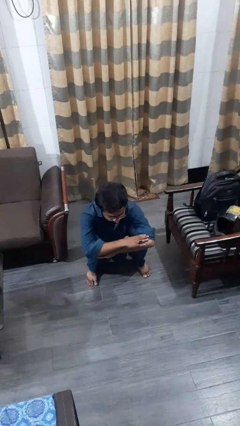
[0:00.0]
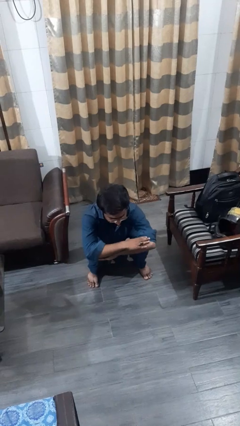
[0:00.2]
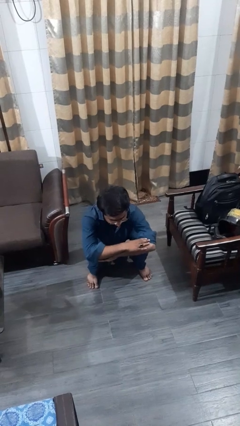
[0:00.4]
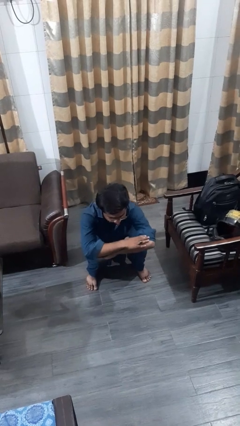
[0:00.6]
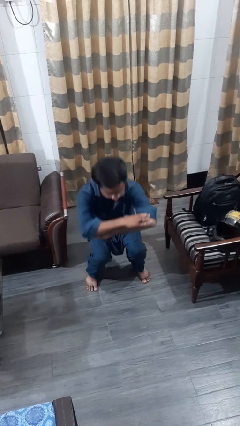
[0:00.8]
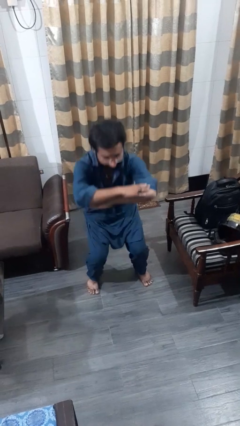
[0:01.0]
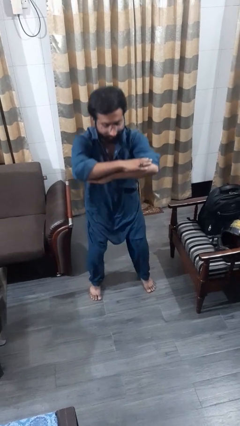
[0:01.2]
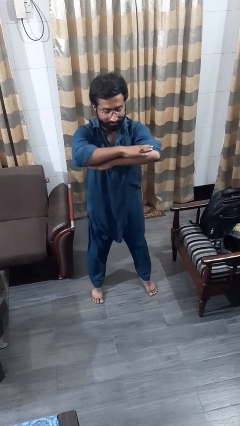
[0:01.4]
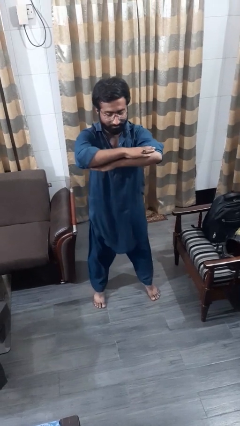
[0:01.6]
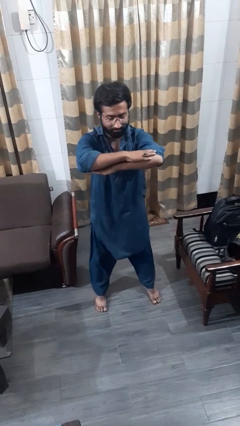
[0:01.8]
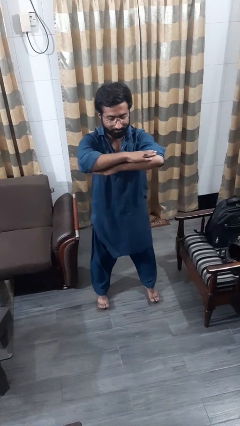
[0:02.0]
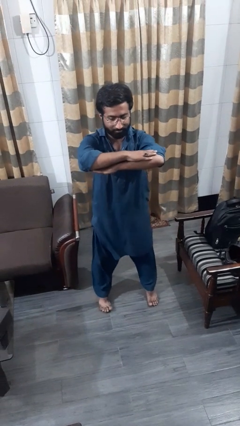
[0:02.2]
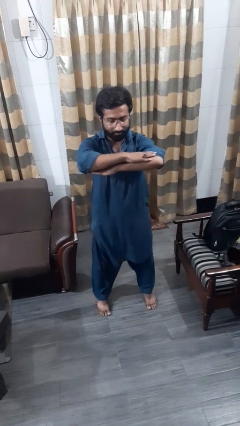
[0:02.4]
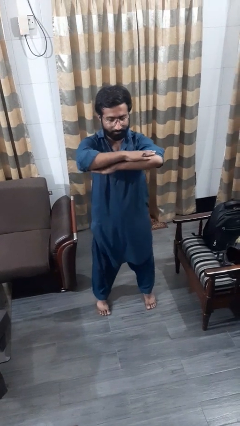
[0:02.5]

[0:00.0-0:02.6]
person stands up

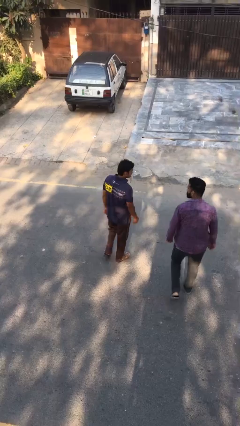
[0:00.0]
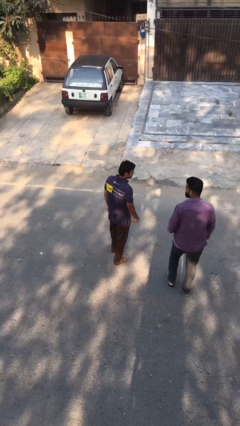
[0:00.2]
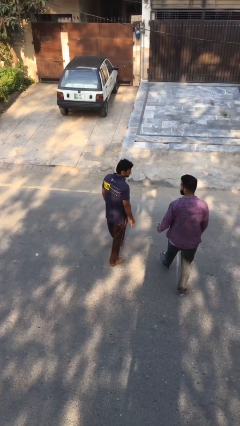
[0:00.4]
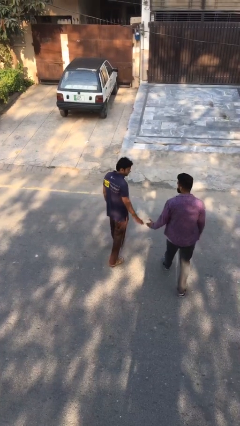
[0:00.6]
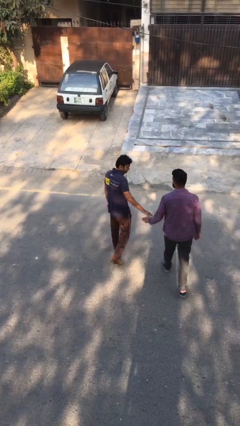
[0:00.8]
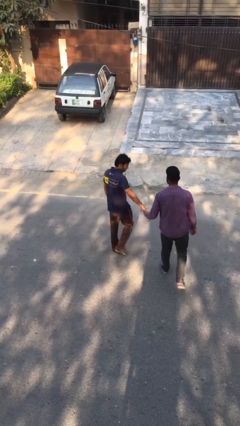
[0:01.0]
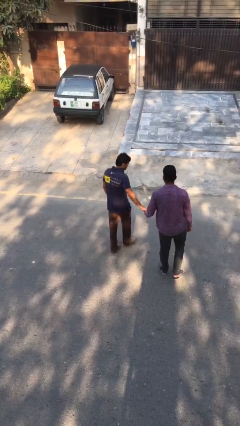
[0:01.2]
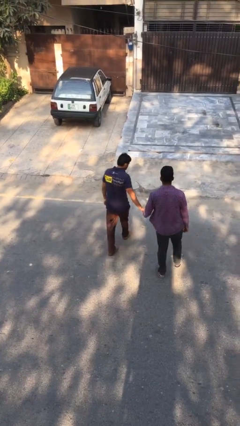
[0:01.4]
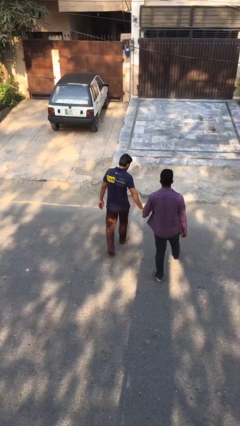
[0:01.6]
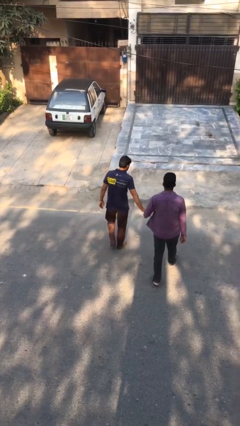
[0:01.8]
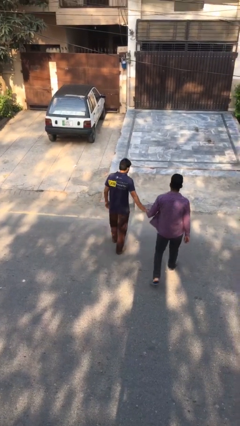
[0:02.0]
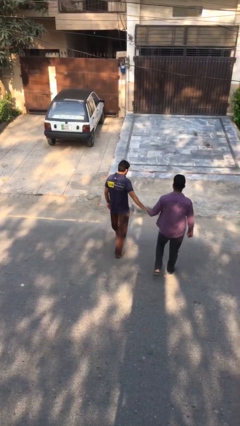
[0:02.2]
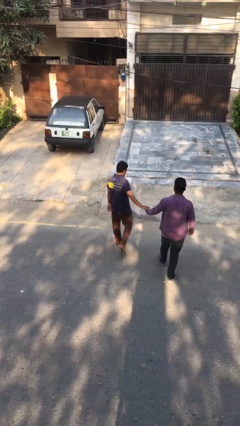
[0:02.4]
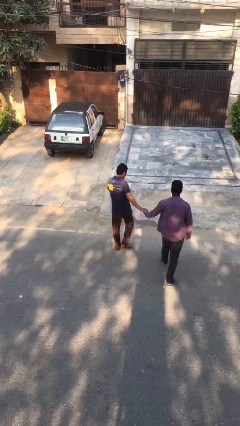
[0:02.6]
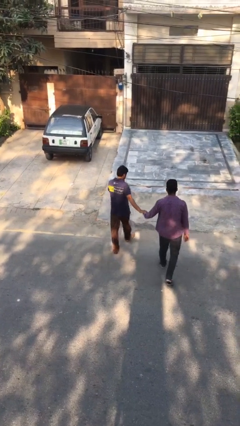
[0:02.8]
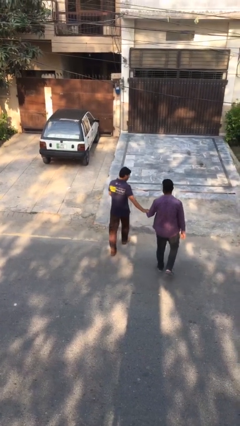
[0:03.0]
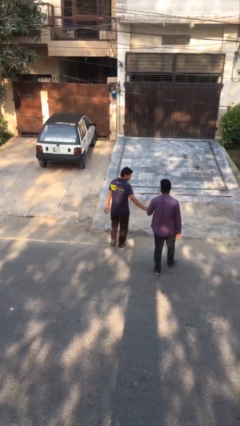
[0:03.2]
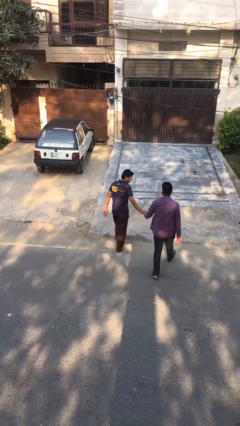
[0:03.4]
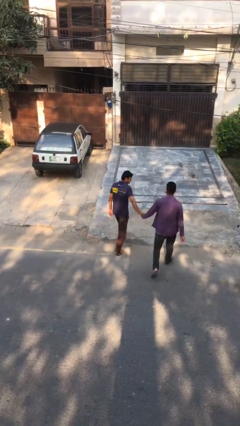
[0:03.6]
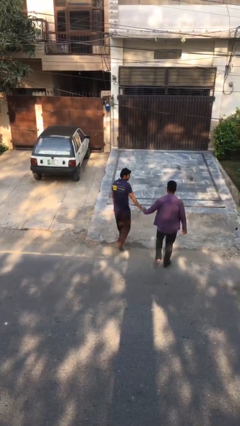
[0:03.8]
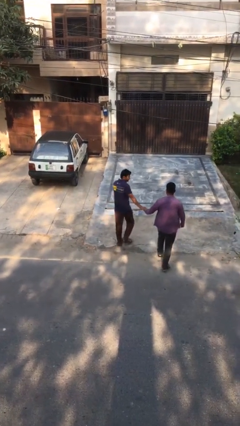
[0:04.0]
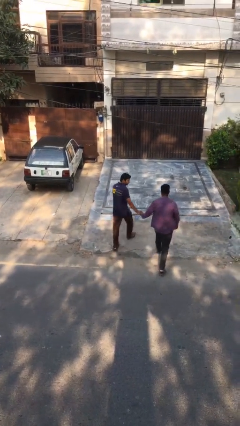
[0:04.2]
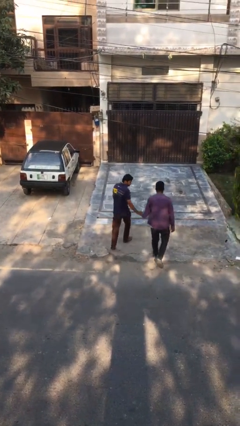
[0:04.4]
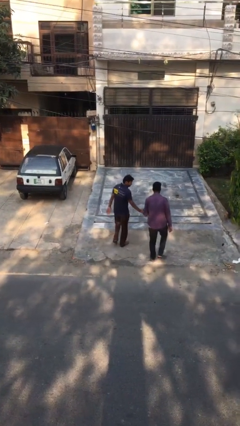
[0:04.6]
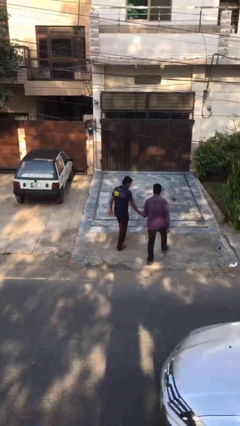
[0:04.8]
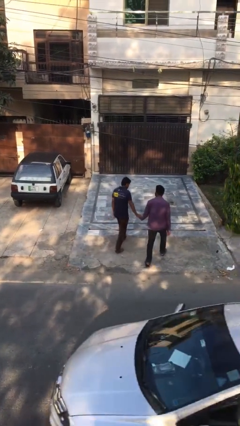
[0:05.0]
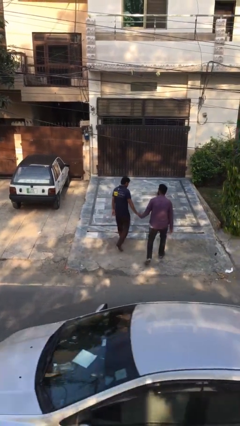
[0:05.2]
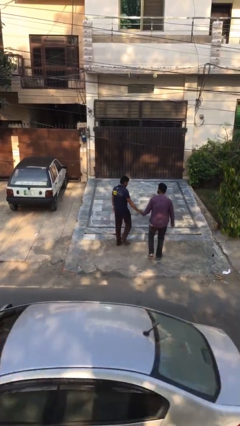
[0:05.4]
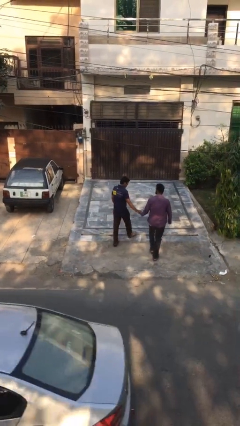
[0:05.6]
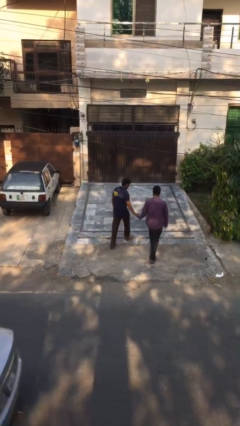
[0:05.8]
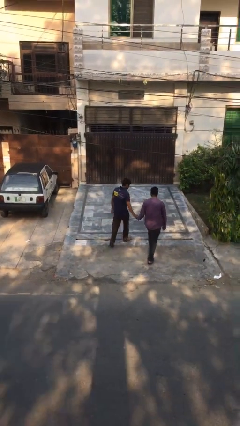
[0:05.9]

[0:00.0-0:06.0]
person holds hand

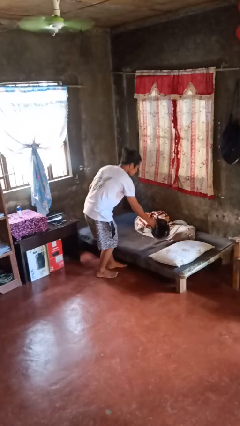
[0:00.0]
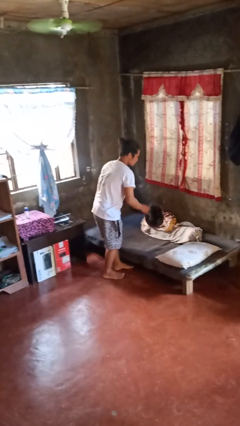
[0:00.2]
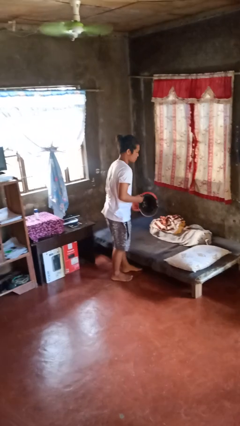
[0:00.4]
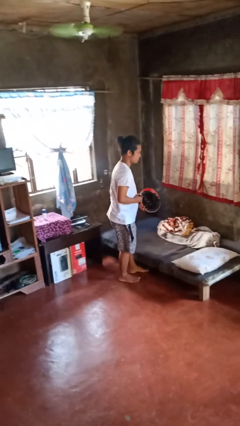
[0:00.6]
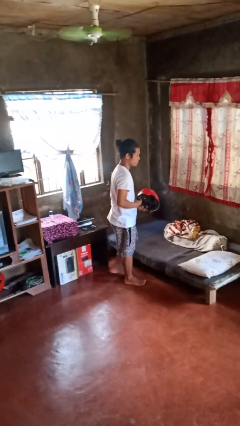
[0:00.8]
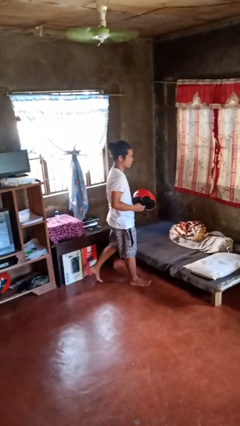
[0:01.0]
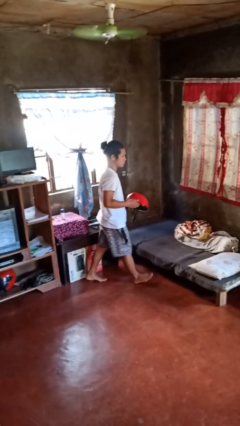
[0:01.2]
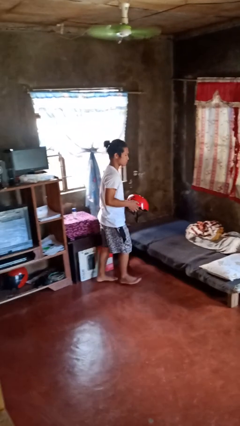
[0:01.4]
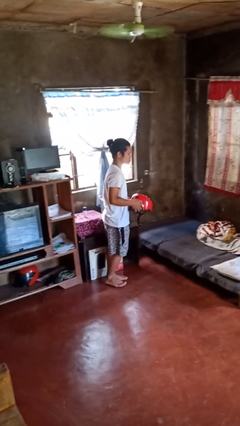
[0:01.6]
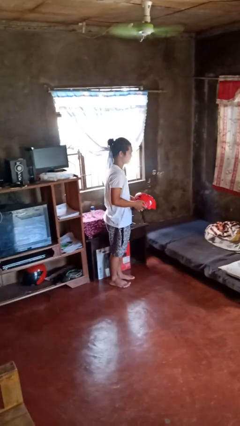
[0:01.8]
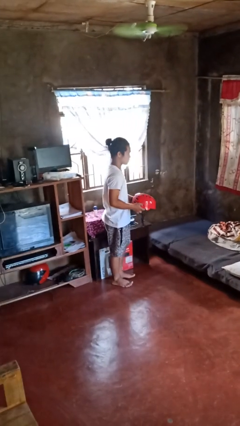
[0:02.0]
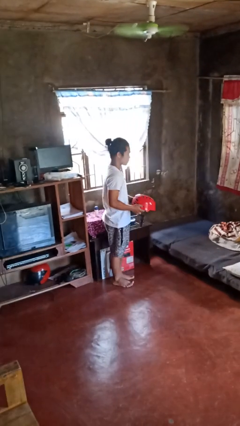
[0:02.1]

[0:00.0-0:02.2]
person picks up object from bed

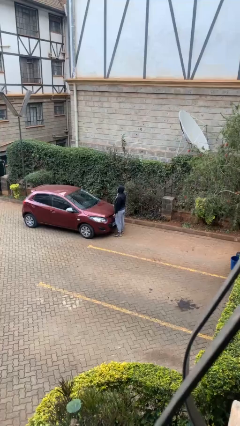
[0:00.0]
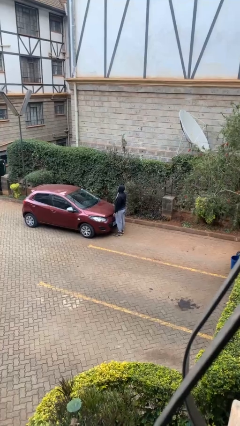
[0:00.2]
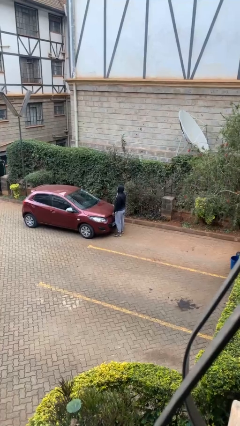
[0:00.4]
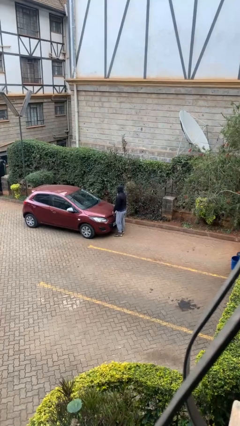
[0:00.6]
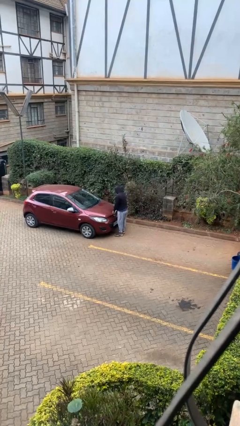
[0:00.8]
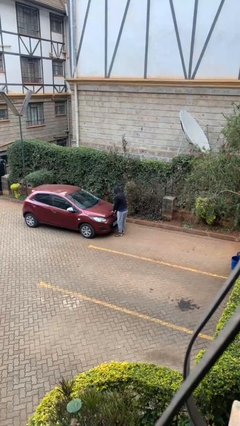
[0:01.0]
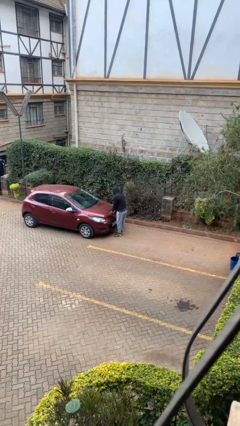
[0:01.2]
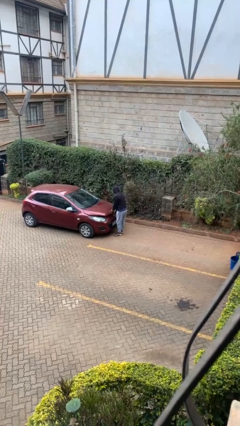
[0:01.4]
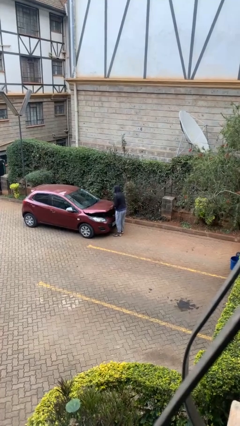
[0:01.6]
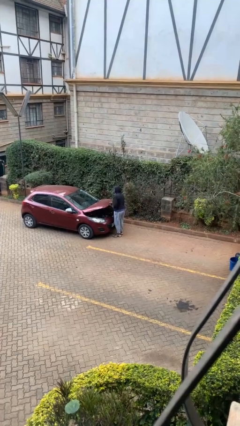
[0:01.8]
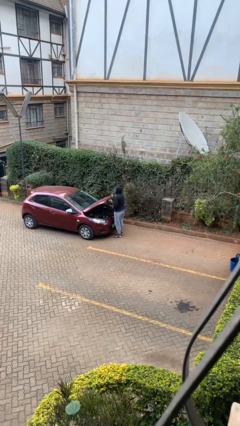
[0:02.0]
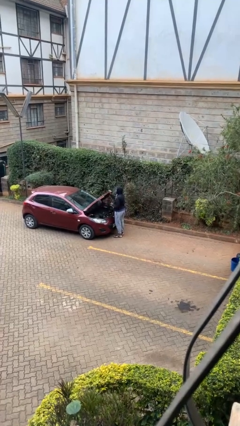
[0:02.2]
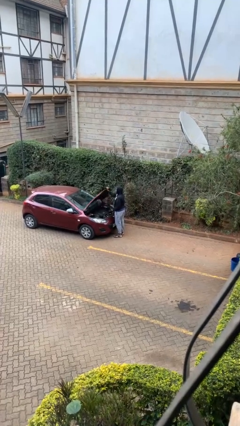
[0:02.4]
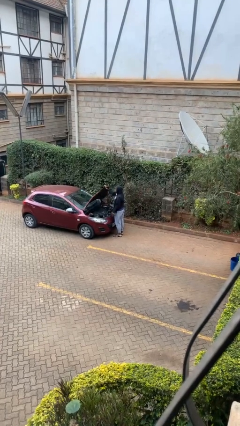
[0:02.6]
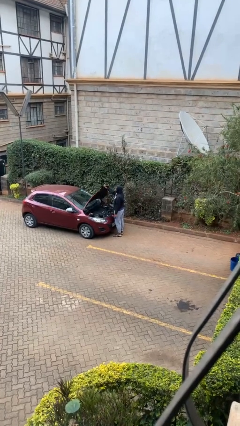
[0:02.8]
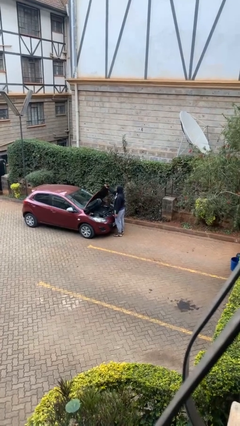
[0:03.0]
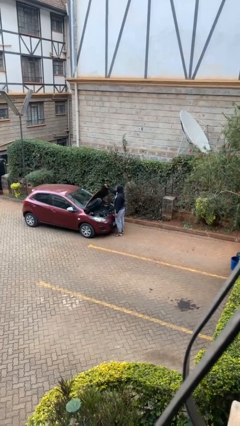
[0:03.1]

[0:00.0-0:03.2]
person opens car hood

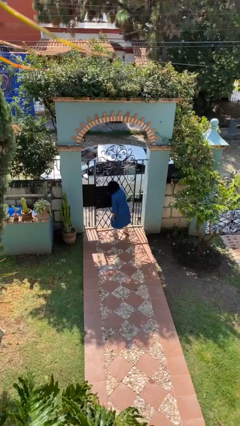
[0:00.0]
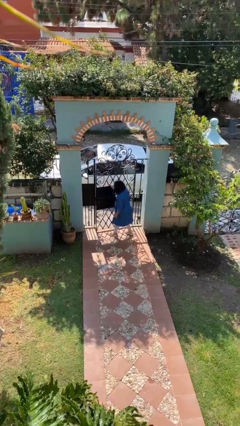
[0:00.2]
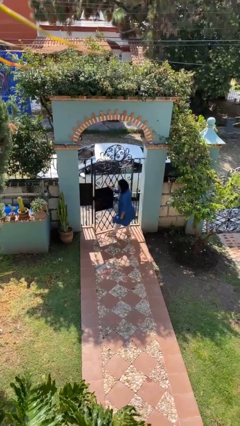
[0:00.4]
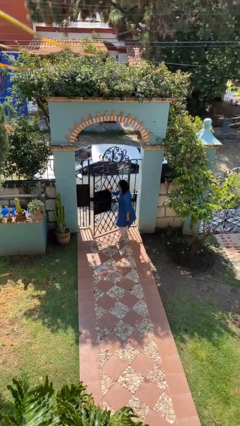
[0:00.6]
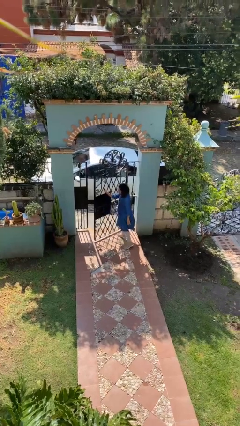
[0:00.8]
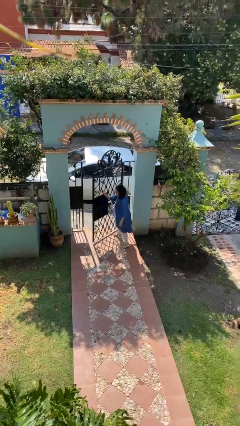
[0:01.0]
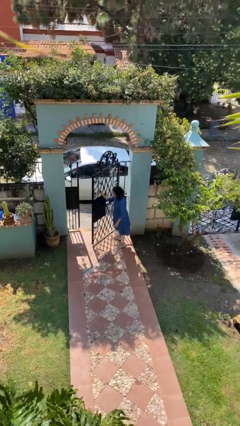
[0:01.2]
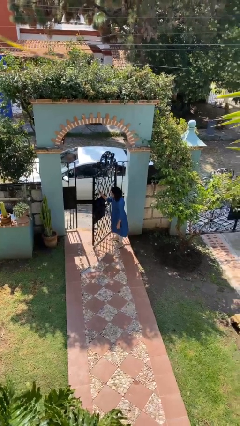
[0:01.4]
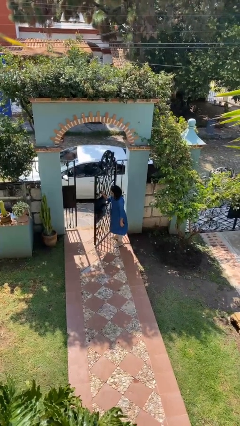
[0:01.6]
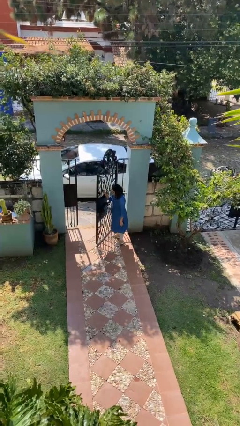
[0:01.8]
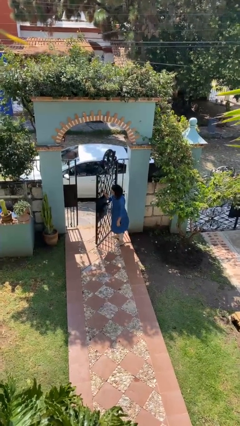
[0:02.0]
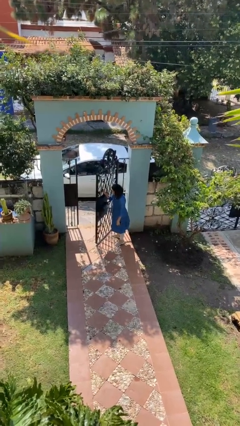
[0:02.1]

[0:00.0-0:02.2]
person opens facility door

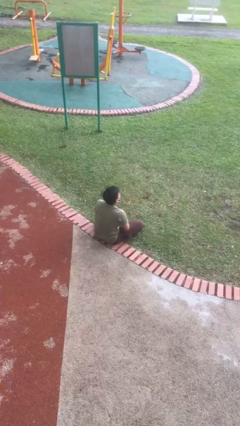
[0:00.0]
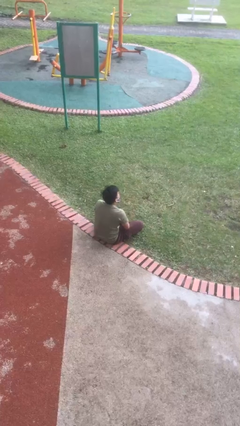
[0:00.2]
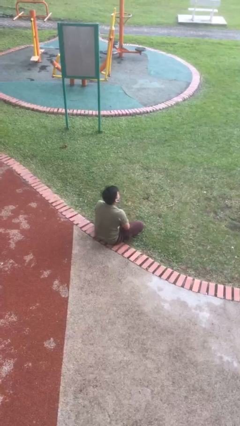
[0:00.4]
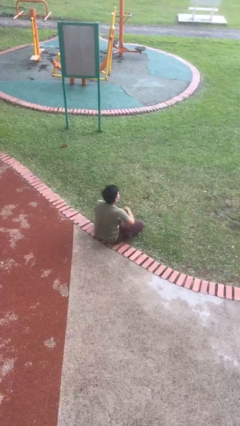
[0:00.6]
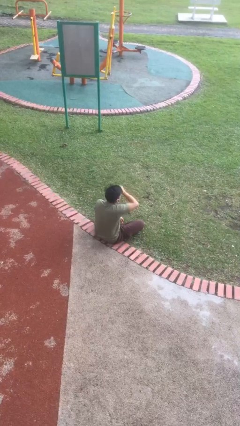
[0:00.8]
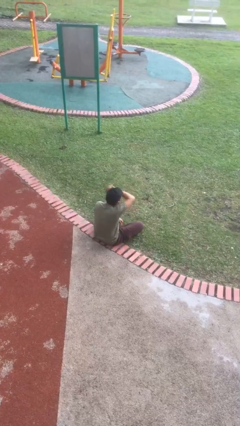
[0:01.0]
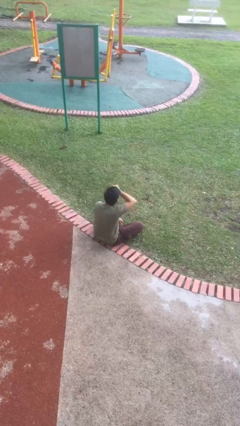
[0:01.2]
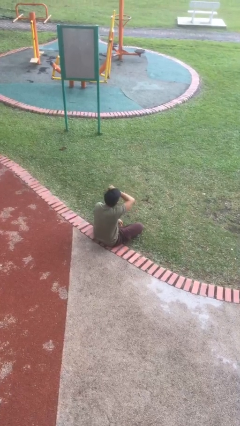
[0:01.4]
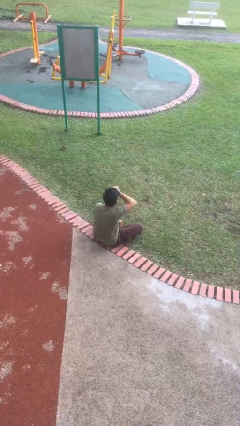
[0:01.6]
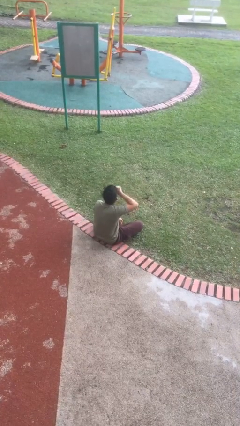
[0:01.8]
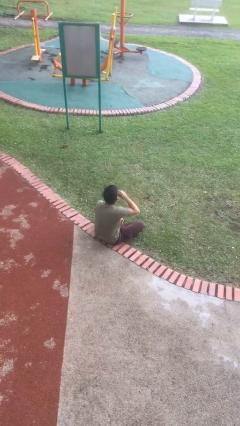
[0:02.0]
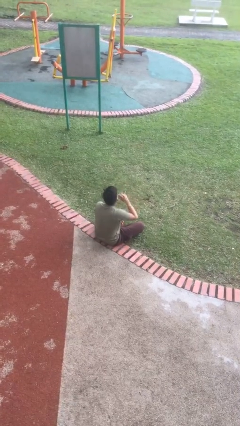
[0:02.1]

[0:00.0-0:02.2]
person rubs eyes
